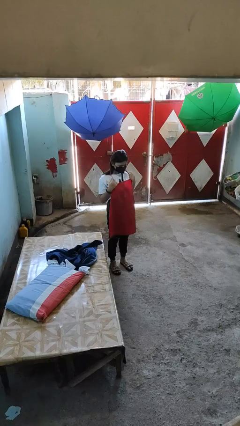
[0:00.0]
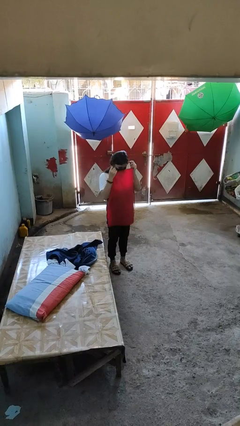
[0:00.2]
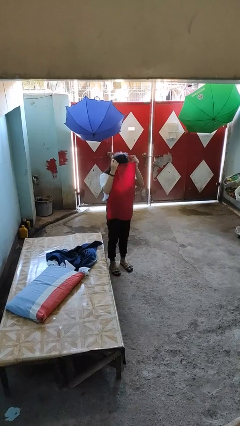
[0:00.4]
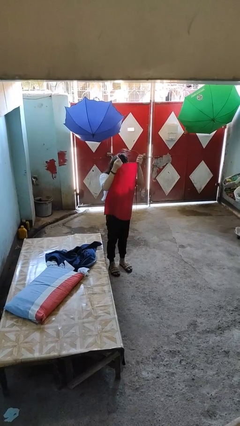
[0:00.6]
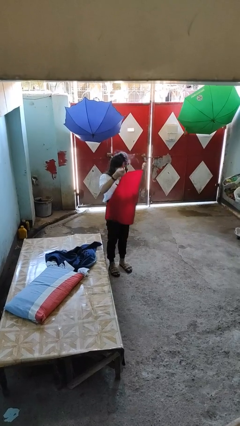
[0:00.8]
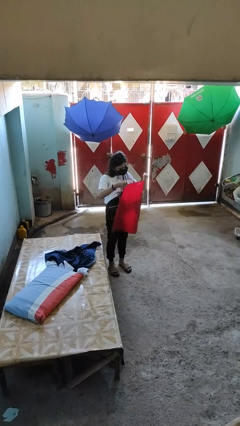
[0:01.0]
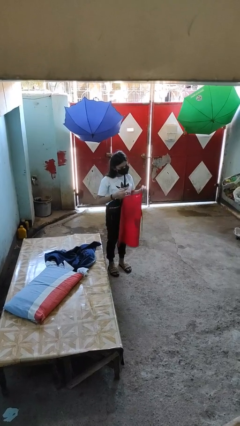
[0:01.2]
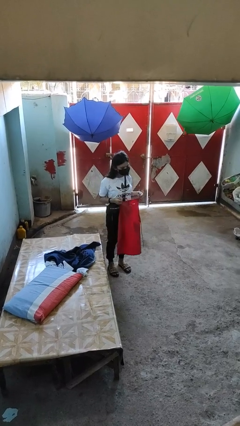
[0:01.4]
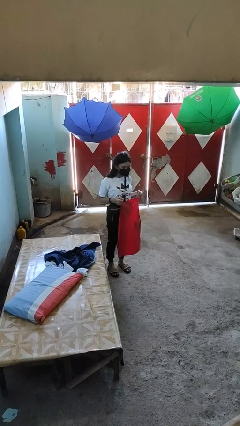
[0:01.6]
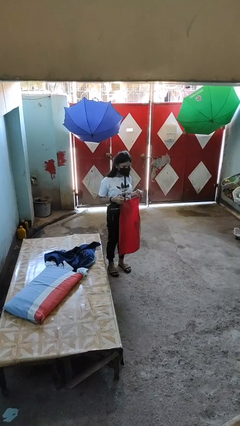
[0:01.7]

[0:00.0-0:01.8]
person takes off apron

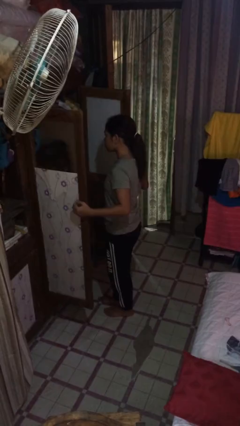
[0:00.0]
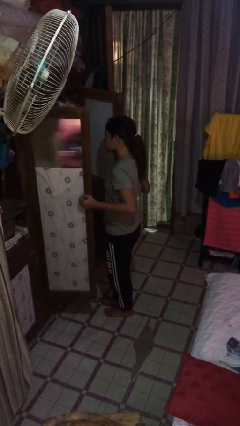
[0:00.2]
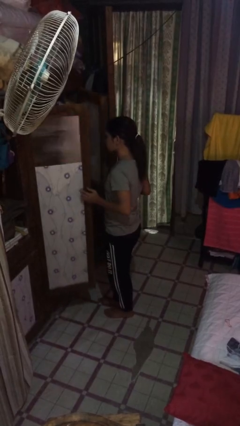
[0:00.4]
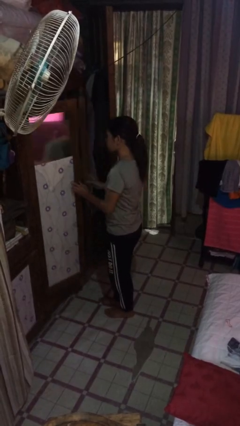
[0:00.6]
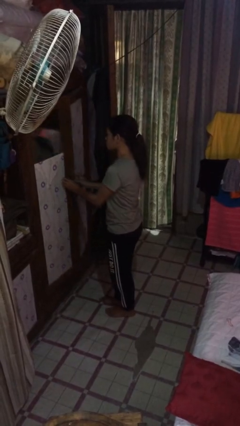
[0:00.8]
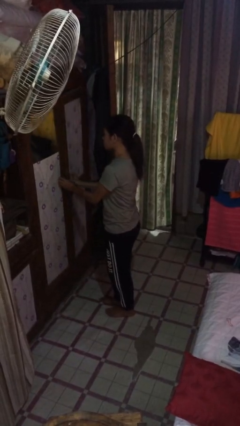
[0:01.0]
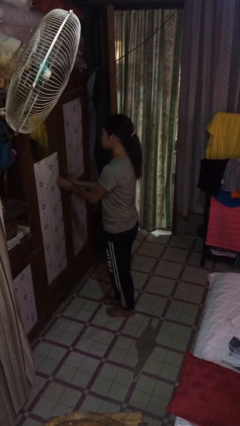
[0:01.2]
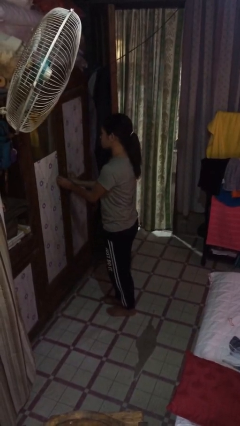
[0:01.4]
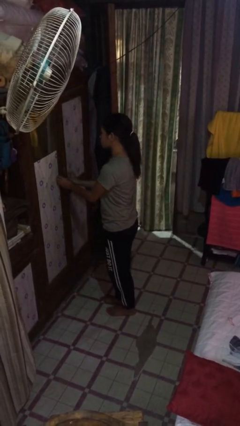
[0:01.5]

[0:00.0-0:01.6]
person closes closet door

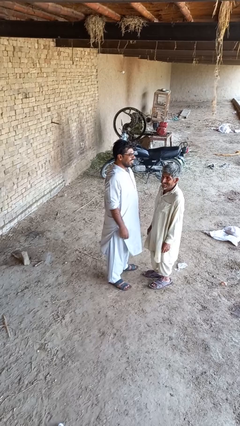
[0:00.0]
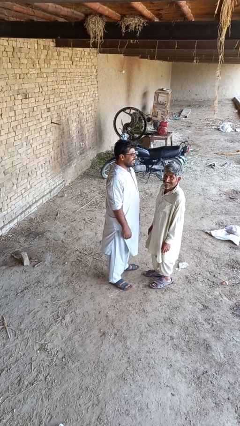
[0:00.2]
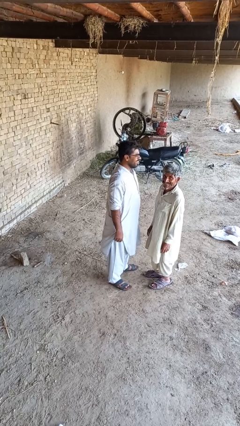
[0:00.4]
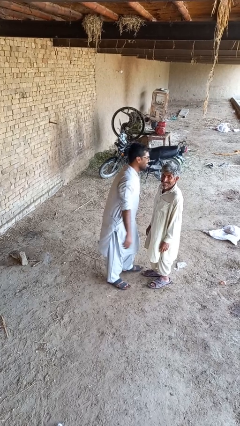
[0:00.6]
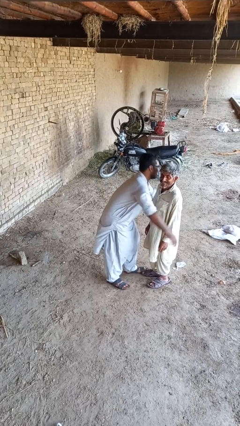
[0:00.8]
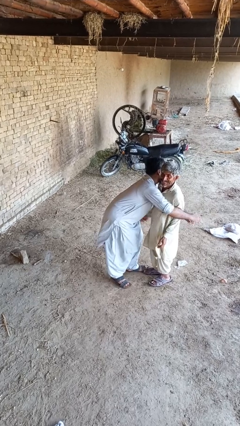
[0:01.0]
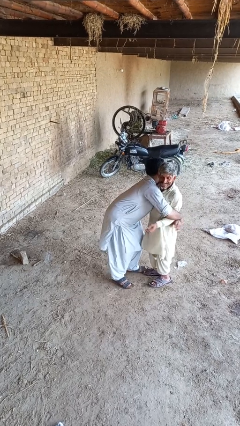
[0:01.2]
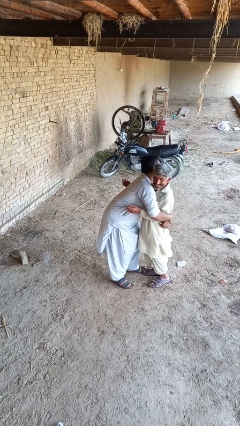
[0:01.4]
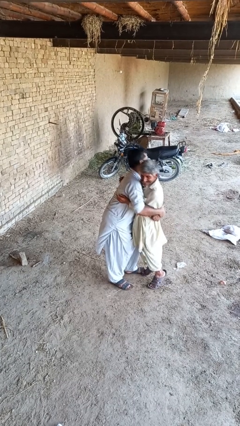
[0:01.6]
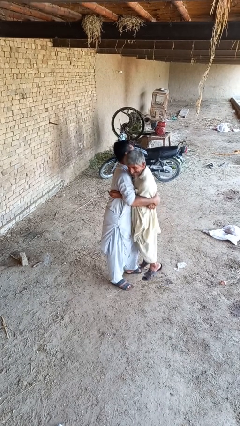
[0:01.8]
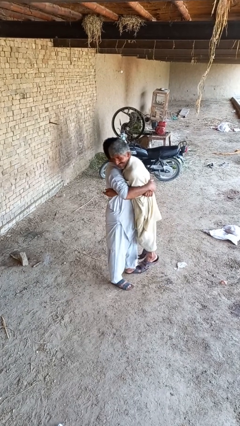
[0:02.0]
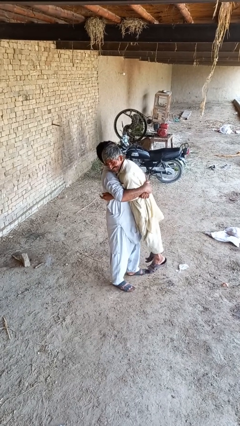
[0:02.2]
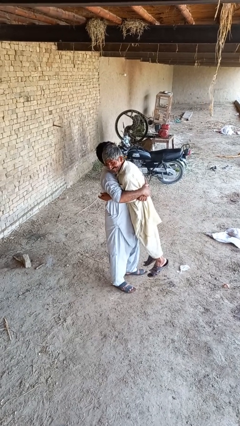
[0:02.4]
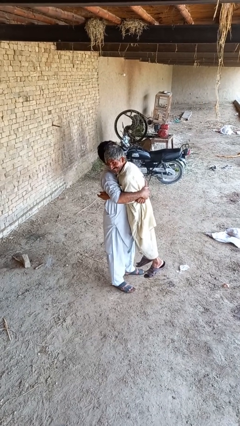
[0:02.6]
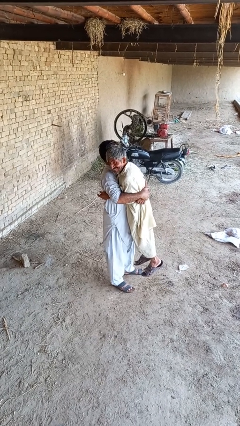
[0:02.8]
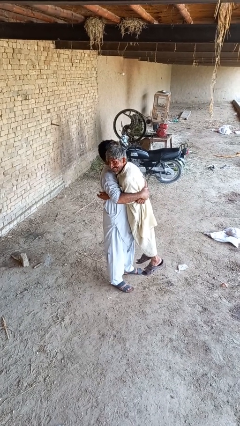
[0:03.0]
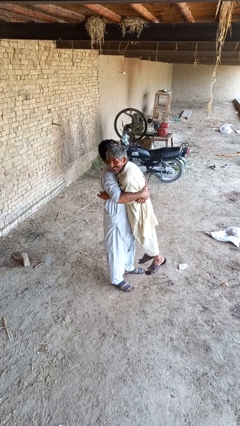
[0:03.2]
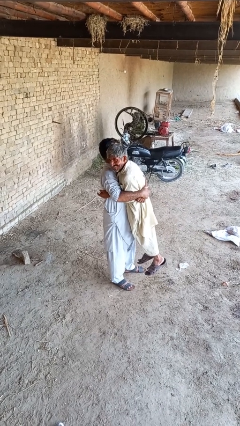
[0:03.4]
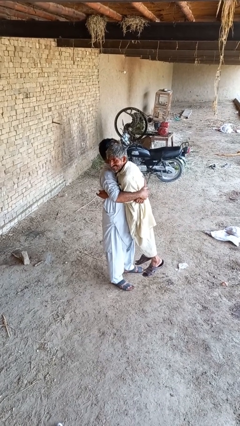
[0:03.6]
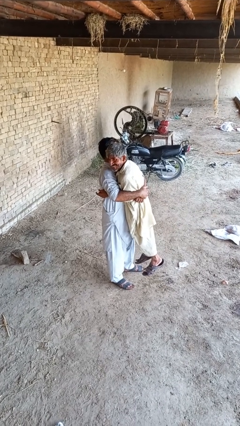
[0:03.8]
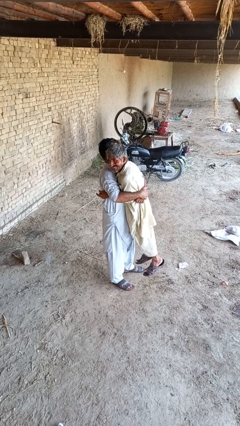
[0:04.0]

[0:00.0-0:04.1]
person picks up person

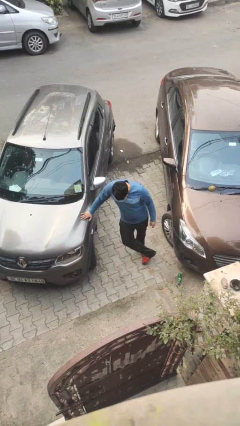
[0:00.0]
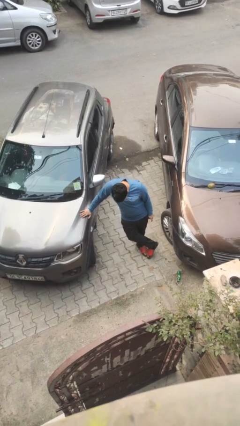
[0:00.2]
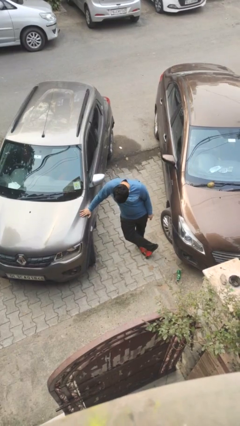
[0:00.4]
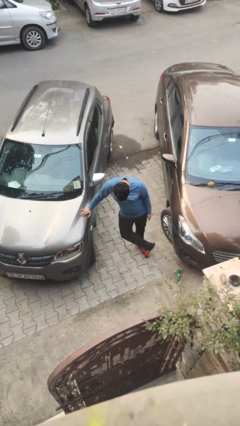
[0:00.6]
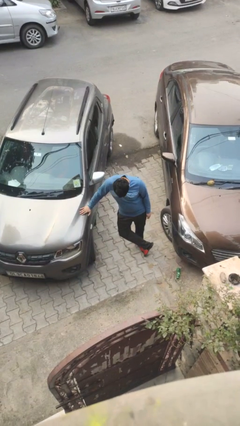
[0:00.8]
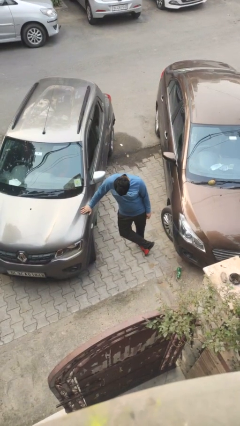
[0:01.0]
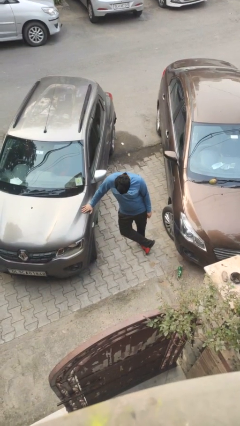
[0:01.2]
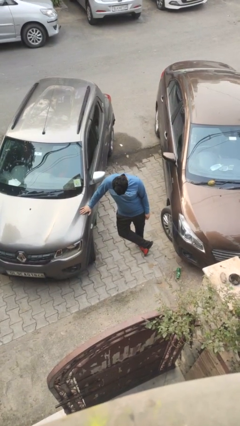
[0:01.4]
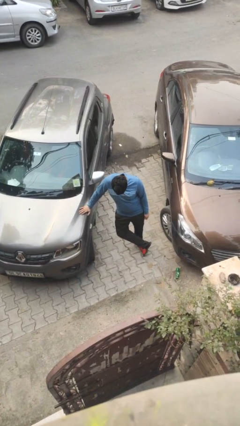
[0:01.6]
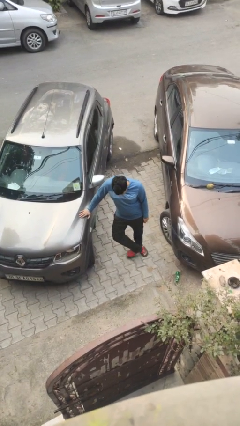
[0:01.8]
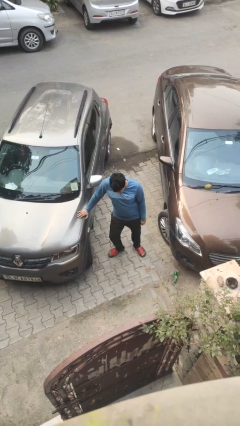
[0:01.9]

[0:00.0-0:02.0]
person leans against car

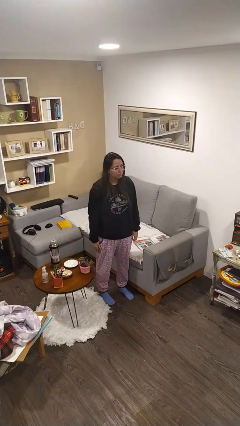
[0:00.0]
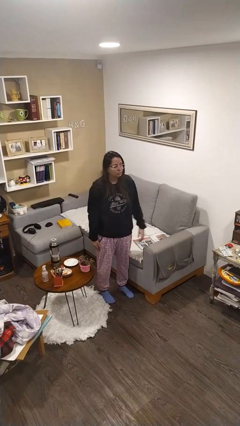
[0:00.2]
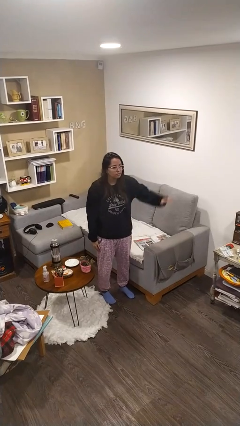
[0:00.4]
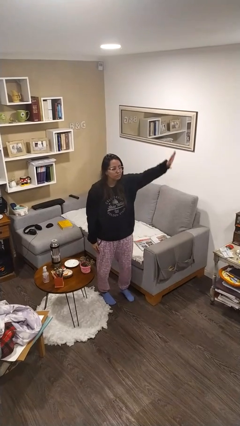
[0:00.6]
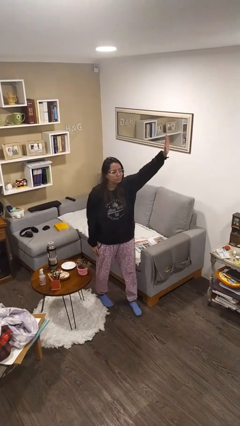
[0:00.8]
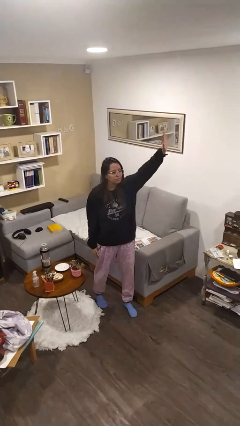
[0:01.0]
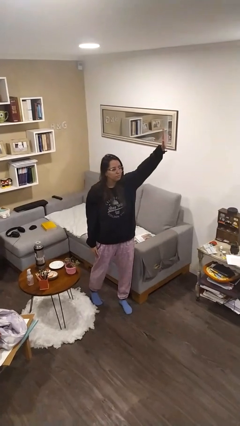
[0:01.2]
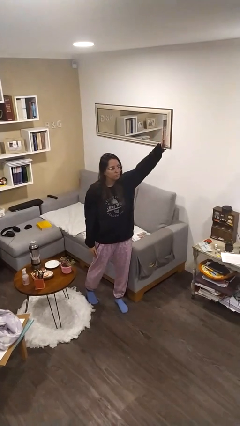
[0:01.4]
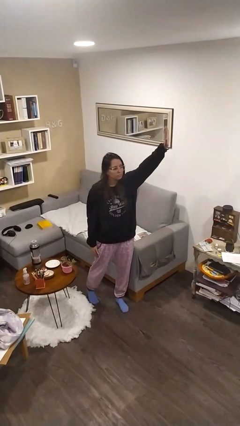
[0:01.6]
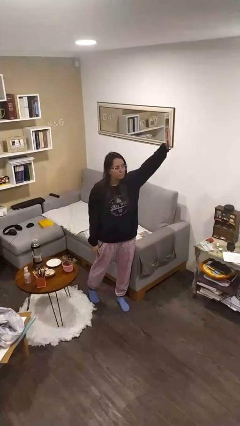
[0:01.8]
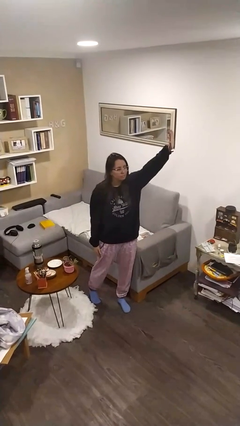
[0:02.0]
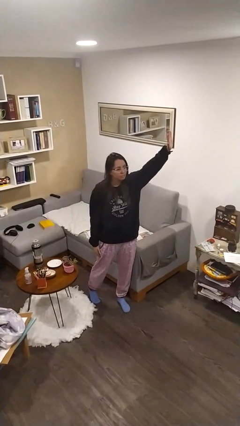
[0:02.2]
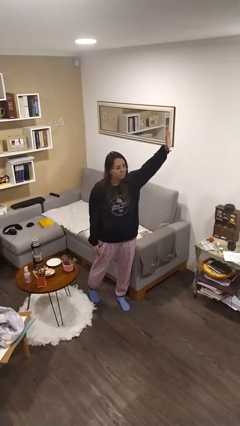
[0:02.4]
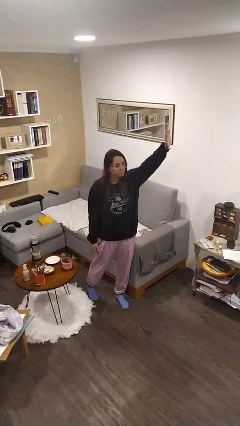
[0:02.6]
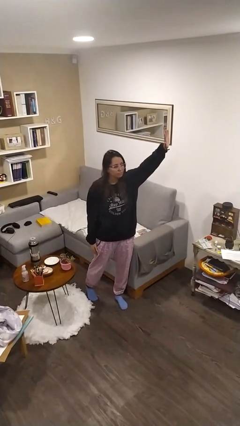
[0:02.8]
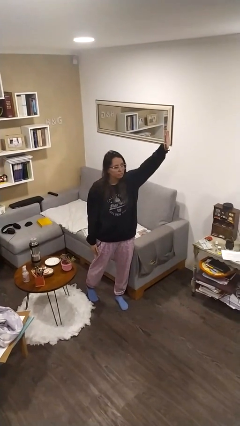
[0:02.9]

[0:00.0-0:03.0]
person gestures raise hand

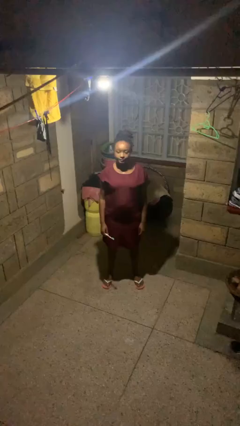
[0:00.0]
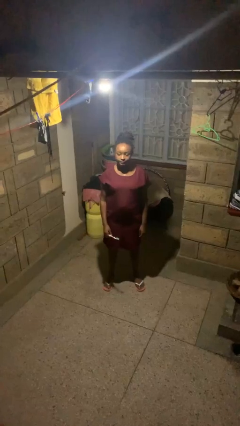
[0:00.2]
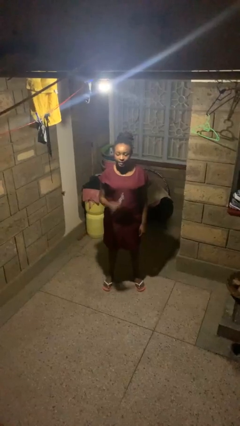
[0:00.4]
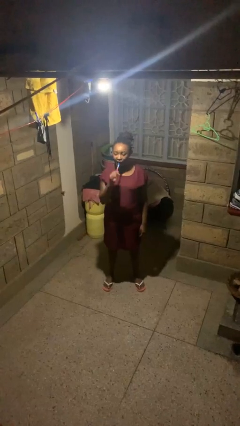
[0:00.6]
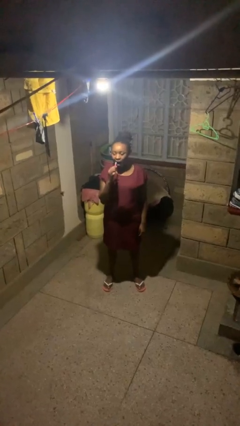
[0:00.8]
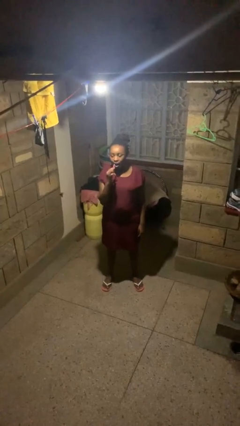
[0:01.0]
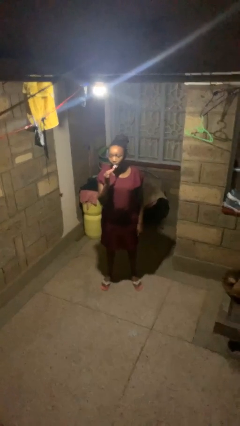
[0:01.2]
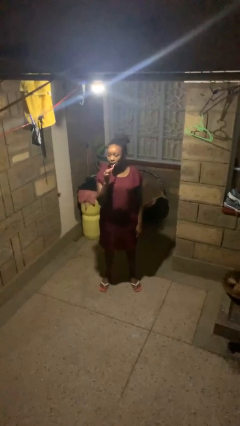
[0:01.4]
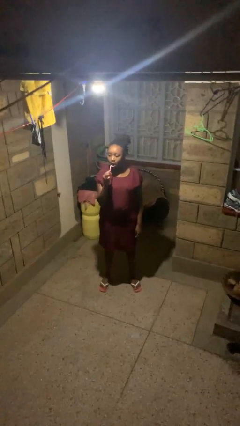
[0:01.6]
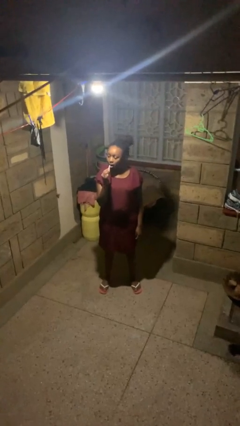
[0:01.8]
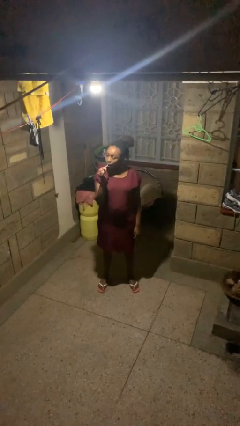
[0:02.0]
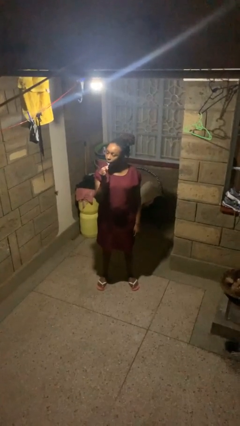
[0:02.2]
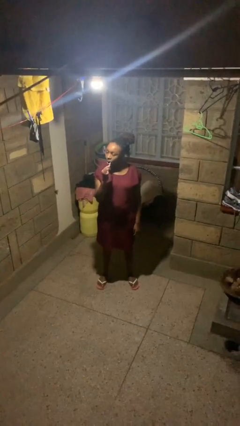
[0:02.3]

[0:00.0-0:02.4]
person brushes teeth

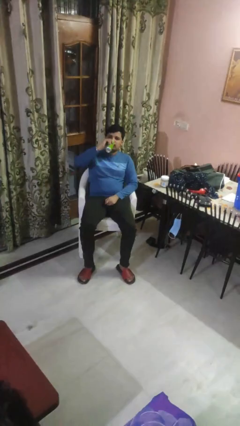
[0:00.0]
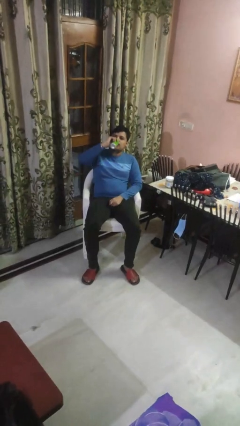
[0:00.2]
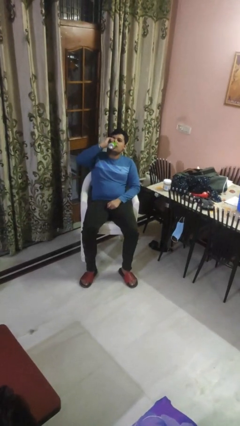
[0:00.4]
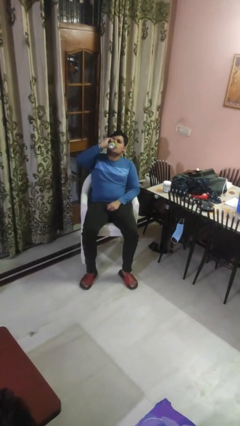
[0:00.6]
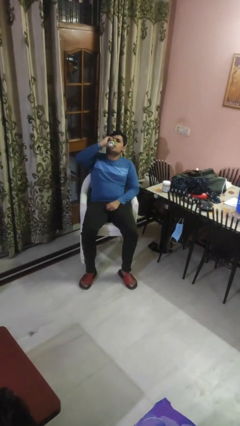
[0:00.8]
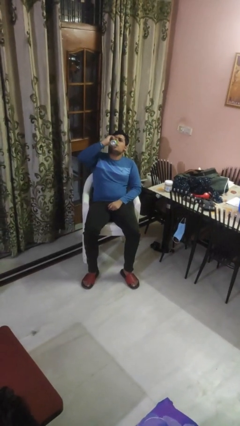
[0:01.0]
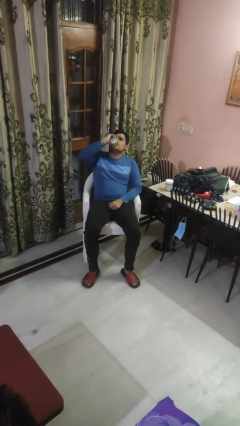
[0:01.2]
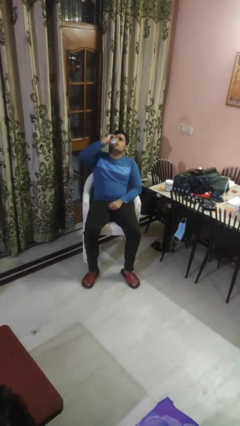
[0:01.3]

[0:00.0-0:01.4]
person drinks from beverage can

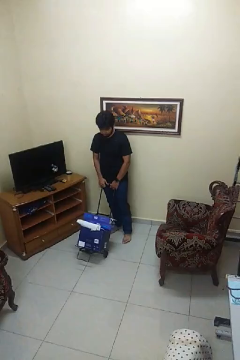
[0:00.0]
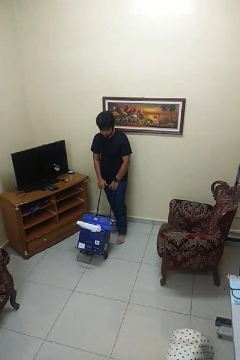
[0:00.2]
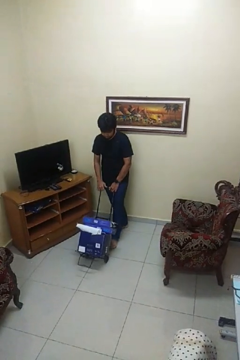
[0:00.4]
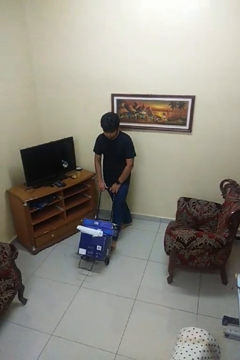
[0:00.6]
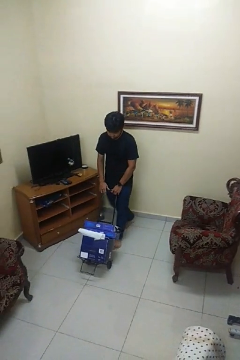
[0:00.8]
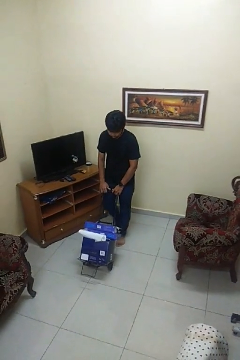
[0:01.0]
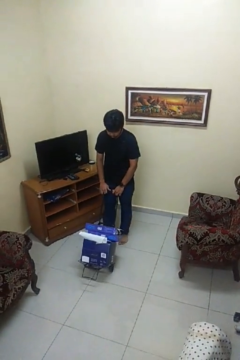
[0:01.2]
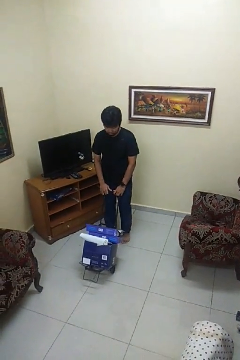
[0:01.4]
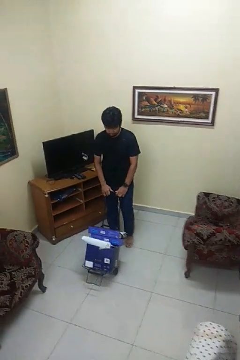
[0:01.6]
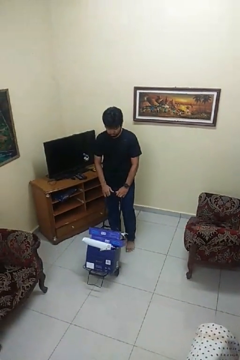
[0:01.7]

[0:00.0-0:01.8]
person pushes wheeled cart
